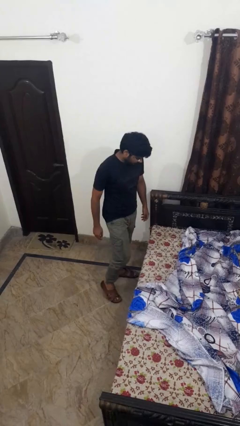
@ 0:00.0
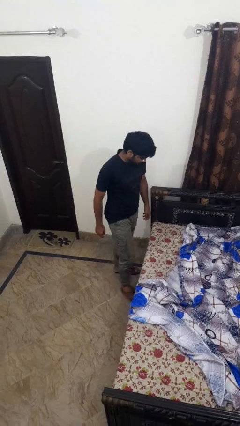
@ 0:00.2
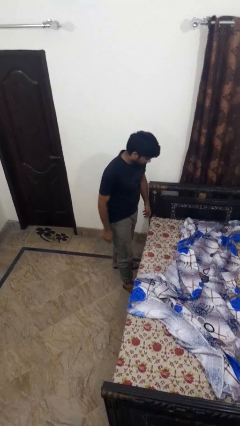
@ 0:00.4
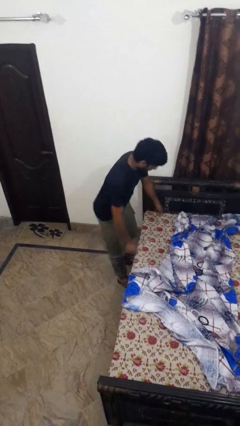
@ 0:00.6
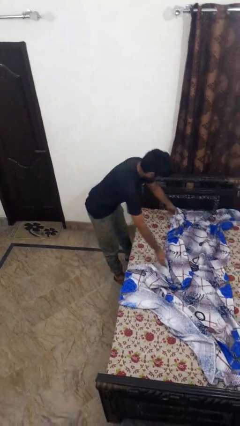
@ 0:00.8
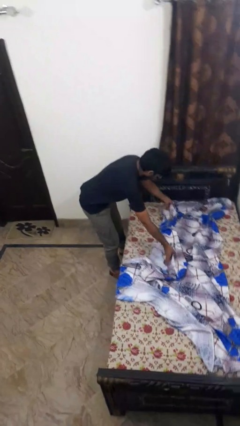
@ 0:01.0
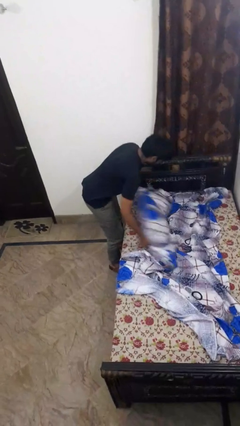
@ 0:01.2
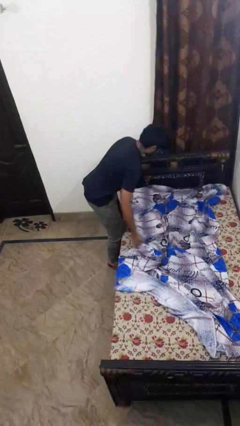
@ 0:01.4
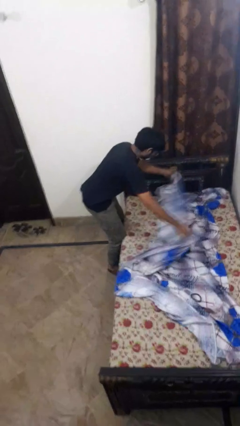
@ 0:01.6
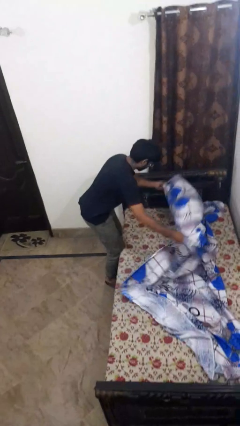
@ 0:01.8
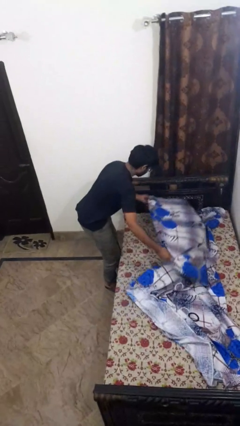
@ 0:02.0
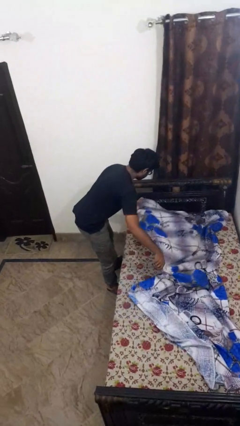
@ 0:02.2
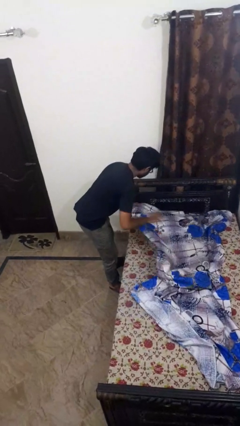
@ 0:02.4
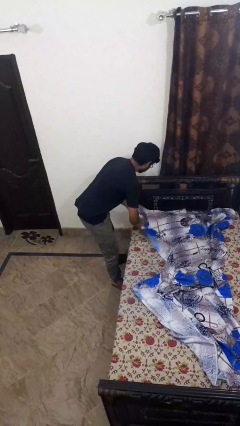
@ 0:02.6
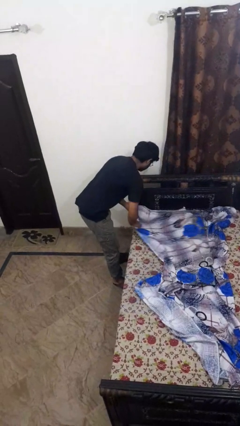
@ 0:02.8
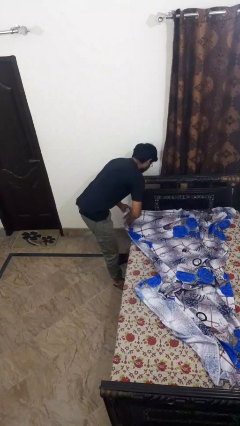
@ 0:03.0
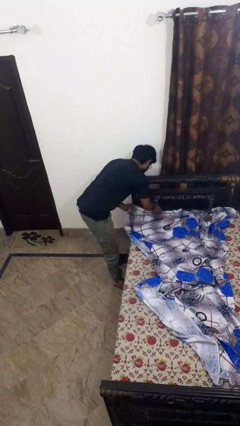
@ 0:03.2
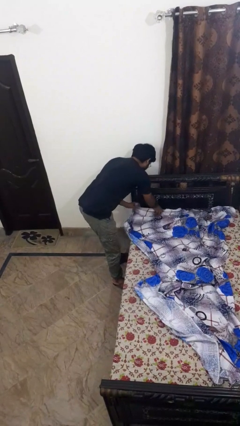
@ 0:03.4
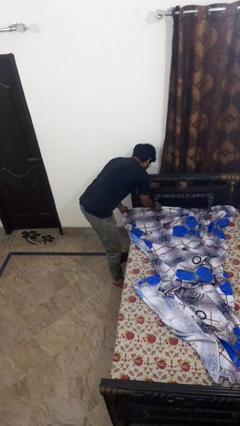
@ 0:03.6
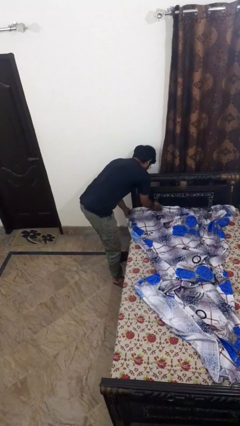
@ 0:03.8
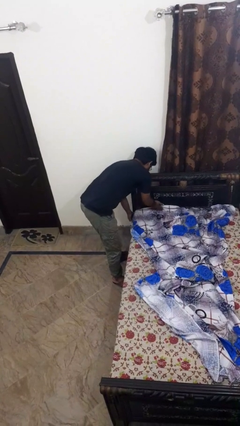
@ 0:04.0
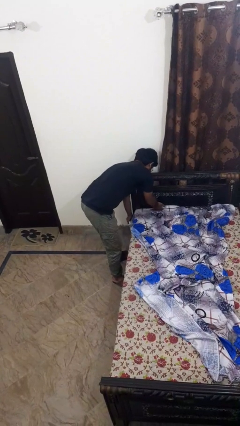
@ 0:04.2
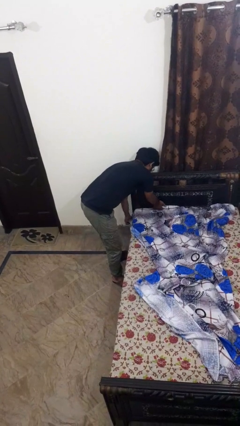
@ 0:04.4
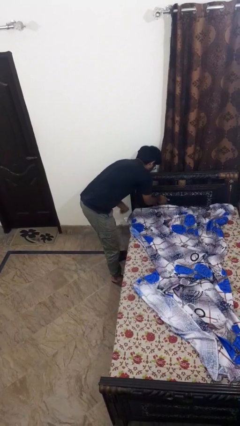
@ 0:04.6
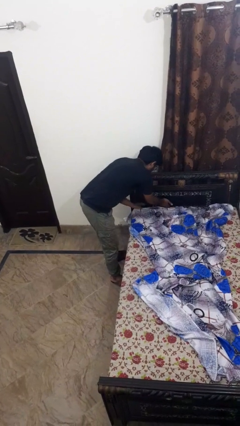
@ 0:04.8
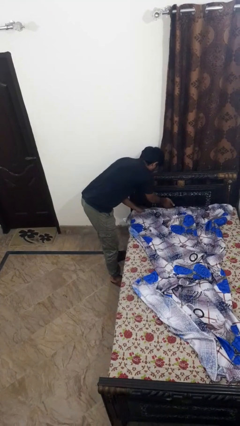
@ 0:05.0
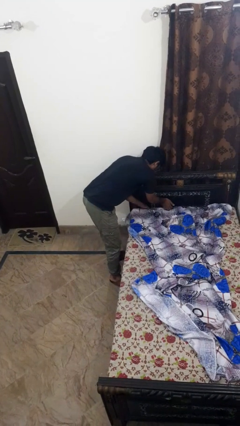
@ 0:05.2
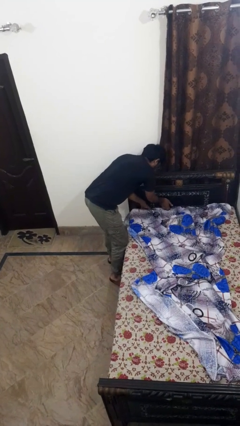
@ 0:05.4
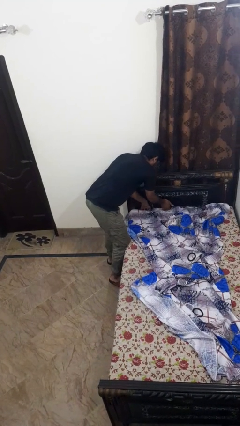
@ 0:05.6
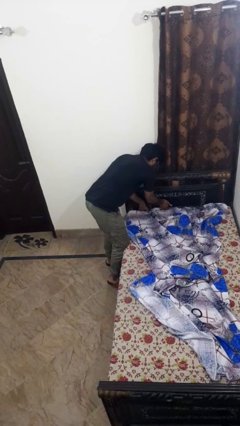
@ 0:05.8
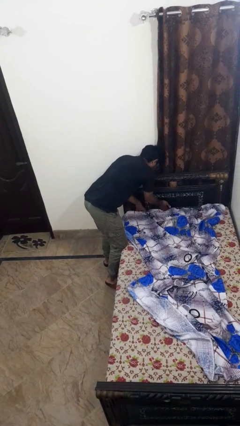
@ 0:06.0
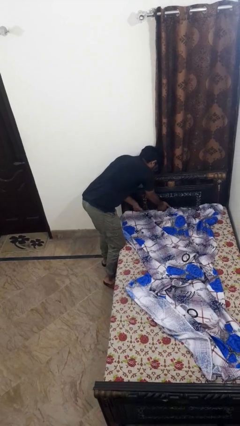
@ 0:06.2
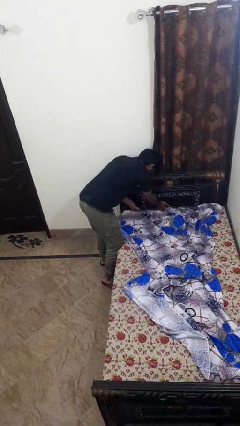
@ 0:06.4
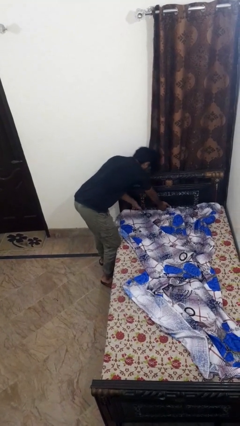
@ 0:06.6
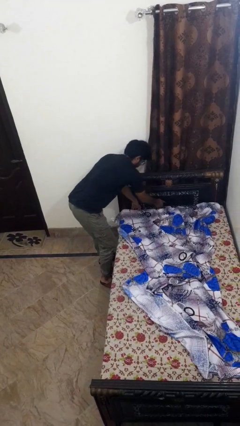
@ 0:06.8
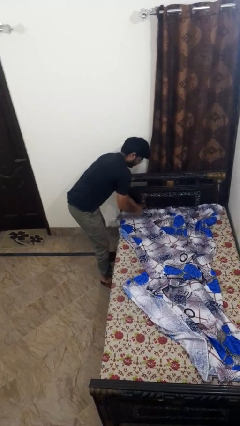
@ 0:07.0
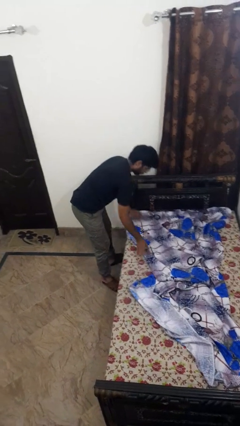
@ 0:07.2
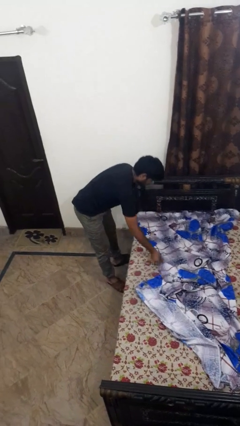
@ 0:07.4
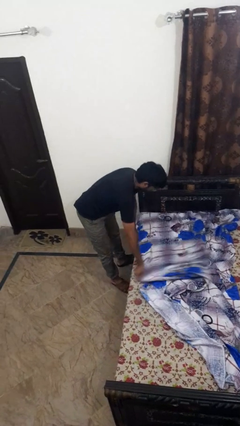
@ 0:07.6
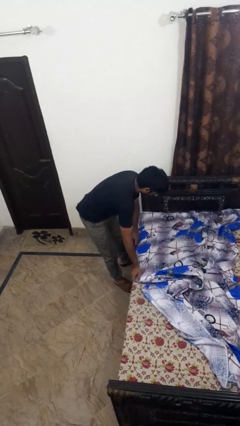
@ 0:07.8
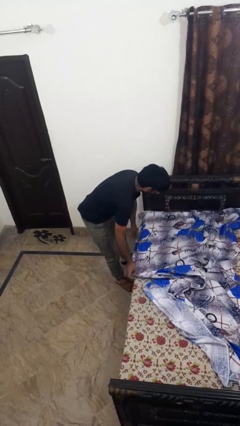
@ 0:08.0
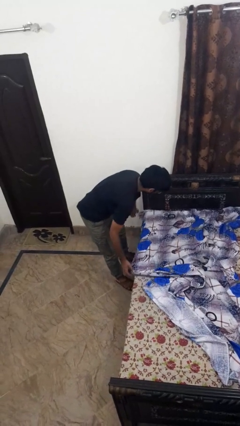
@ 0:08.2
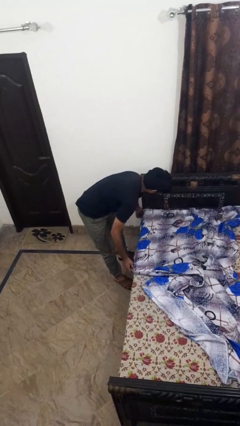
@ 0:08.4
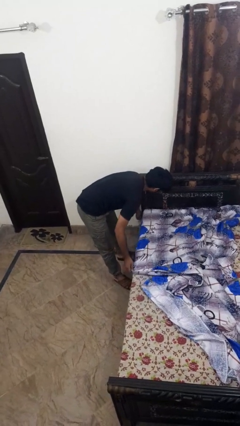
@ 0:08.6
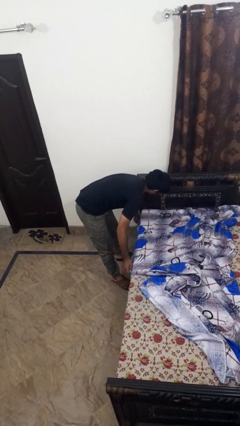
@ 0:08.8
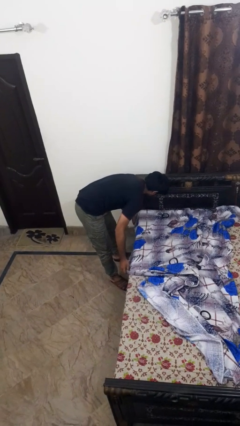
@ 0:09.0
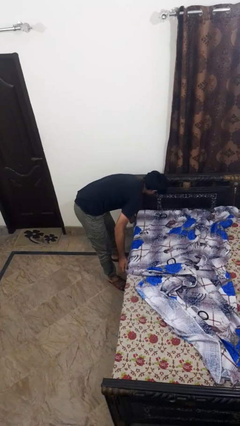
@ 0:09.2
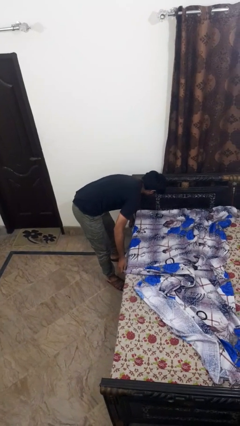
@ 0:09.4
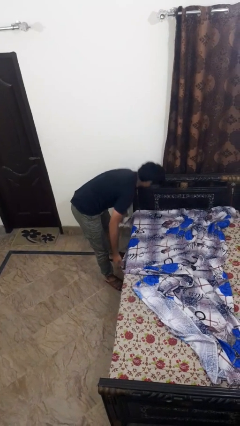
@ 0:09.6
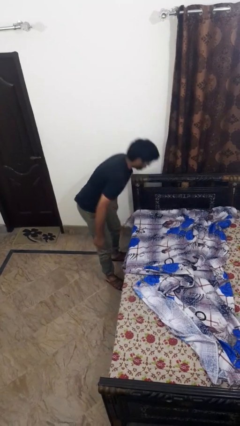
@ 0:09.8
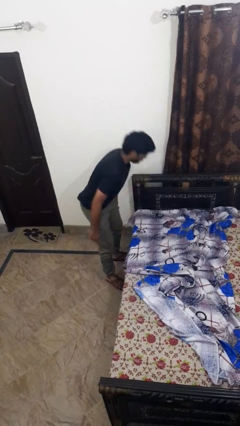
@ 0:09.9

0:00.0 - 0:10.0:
person makes bed

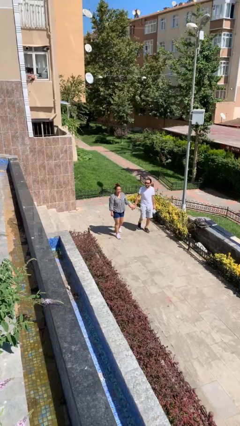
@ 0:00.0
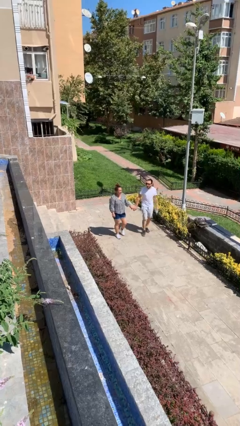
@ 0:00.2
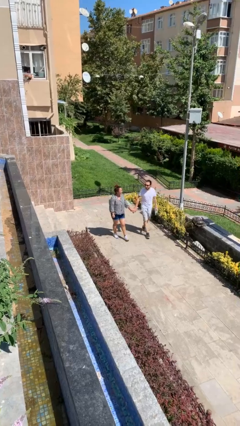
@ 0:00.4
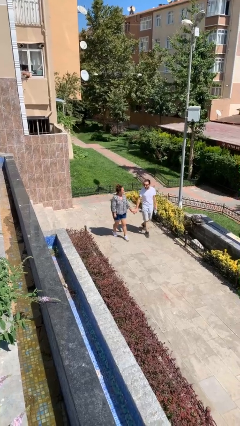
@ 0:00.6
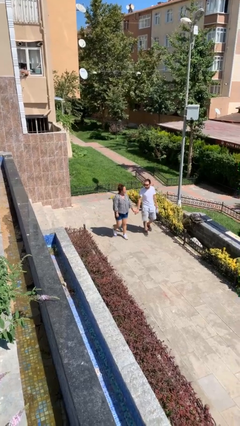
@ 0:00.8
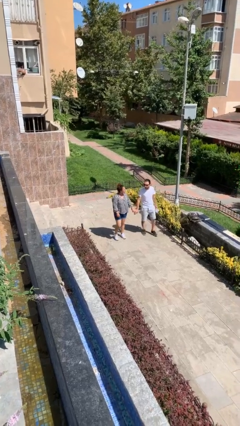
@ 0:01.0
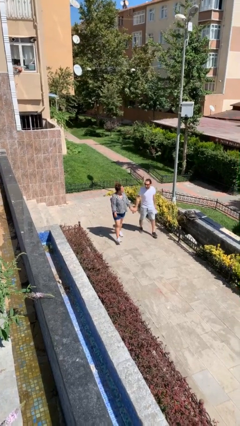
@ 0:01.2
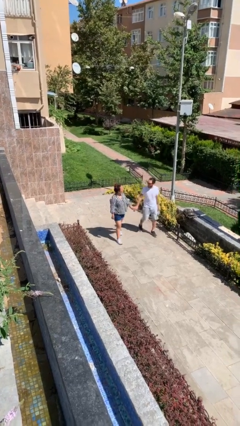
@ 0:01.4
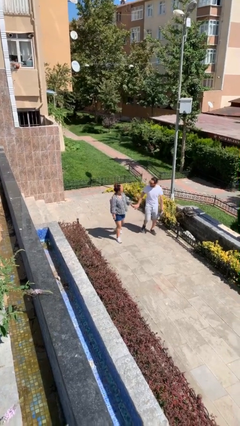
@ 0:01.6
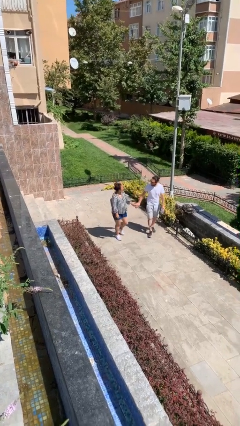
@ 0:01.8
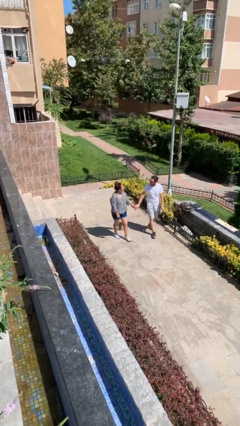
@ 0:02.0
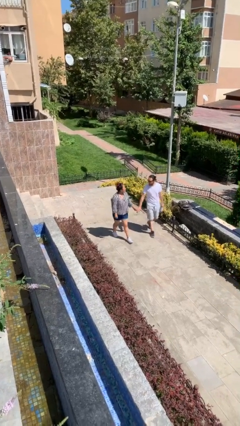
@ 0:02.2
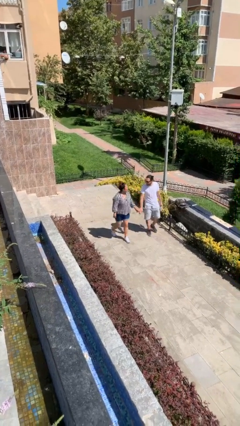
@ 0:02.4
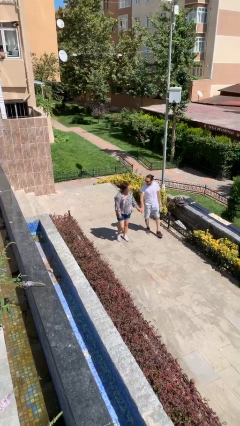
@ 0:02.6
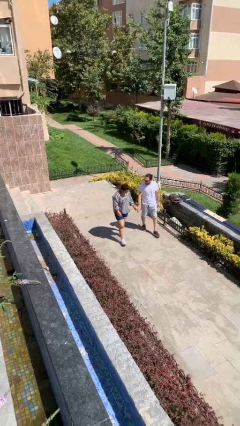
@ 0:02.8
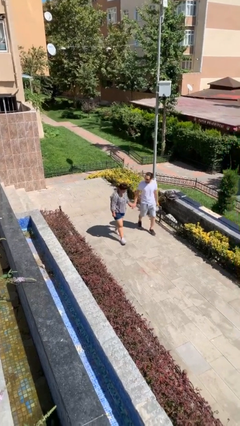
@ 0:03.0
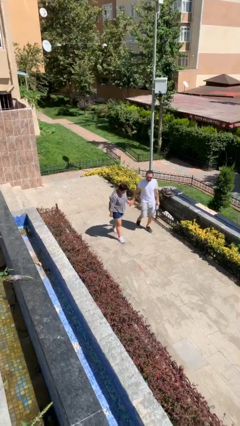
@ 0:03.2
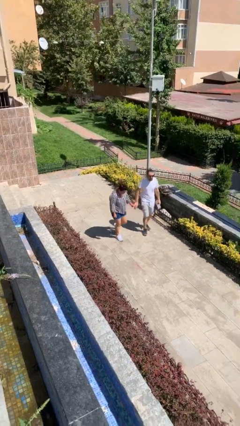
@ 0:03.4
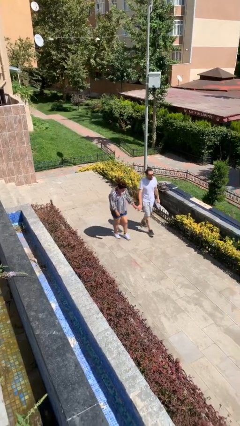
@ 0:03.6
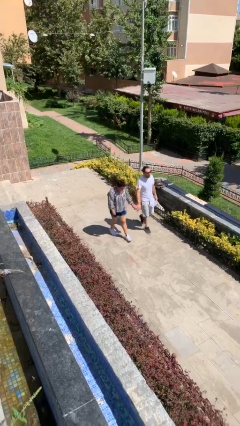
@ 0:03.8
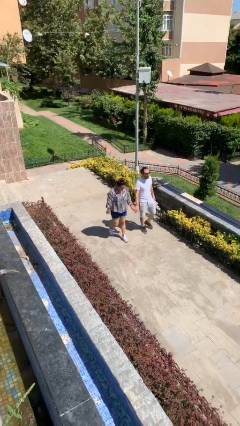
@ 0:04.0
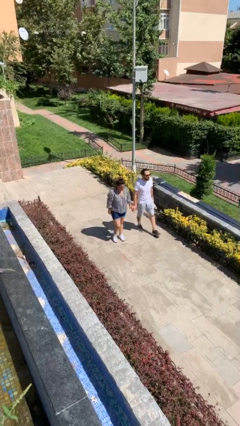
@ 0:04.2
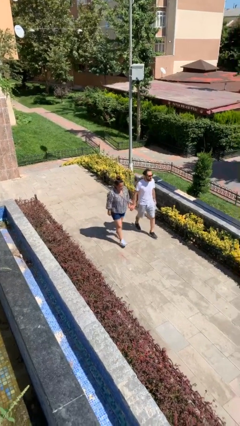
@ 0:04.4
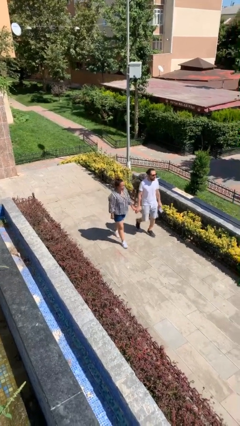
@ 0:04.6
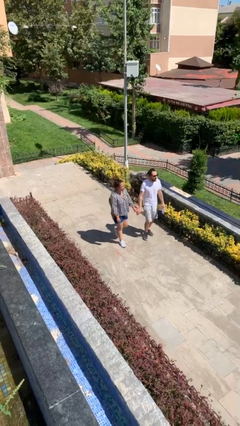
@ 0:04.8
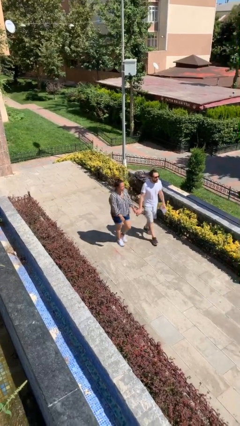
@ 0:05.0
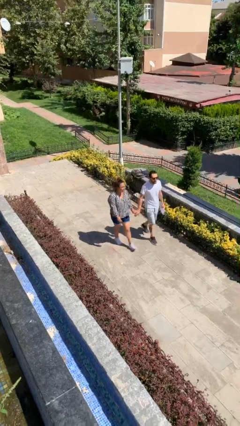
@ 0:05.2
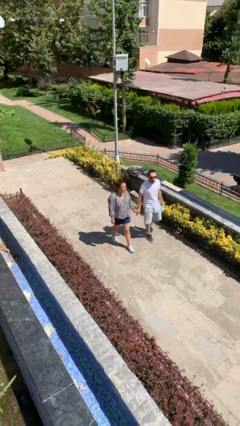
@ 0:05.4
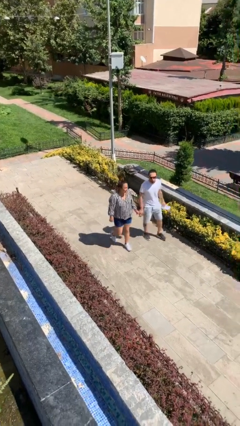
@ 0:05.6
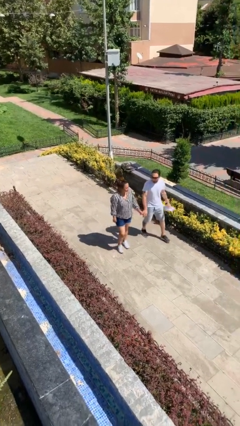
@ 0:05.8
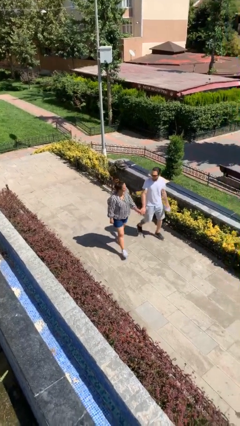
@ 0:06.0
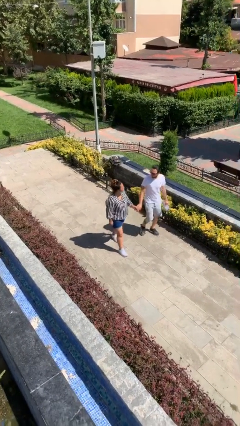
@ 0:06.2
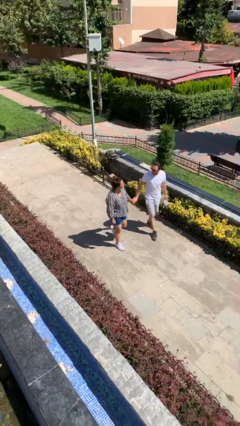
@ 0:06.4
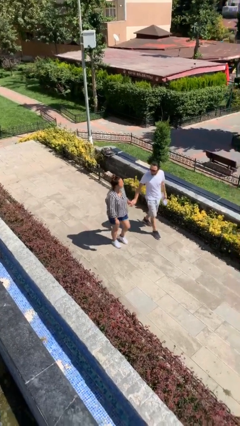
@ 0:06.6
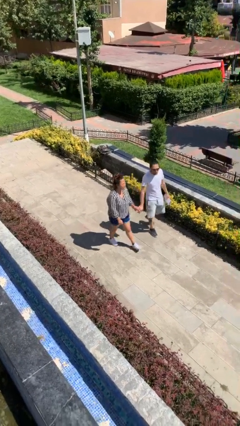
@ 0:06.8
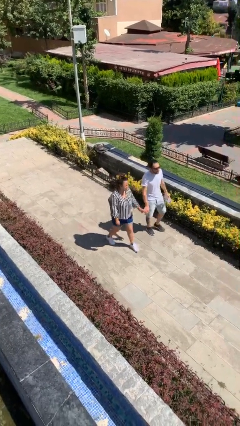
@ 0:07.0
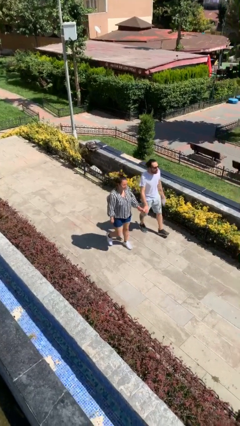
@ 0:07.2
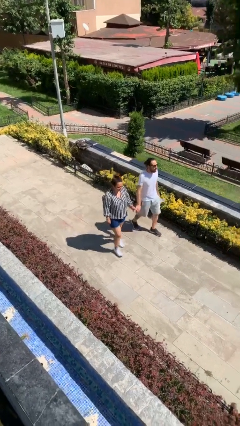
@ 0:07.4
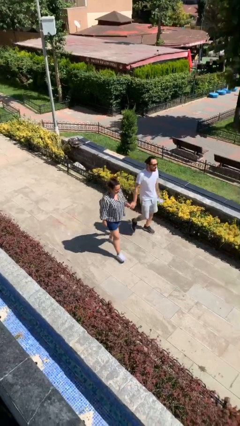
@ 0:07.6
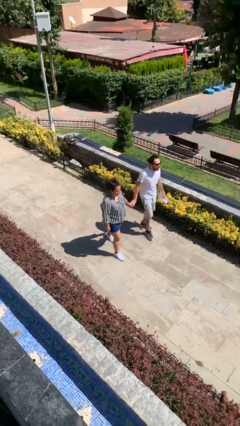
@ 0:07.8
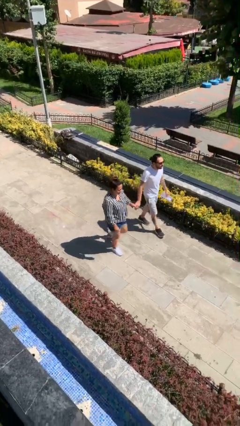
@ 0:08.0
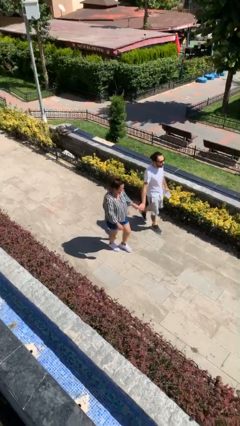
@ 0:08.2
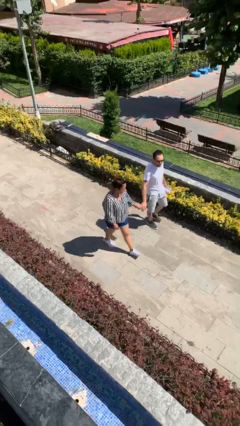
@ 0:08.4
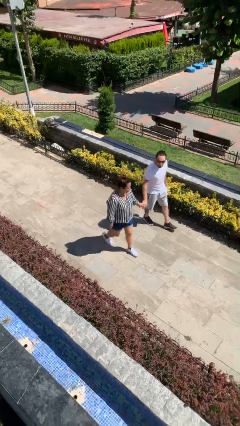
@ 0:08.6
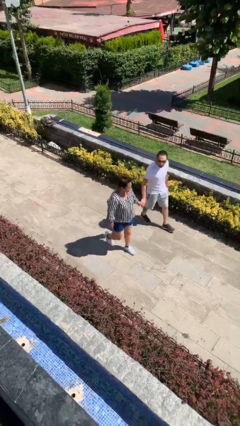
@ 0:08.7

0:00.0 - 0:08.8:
person holds hand
